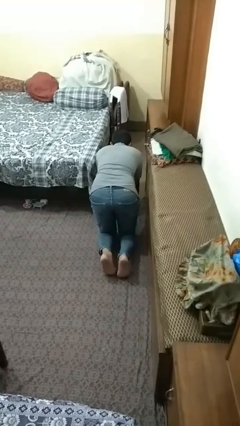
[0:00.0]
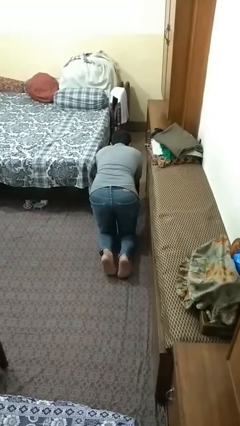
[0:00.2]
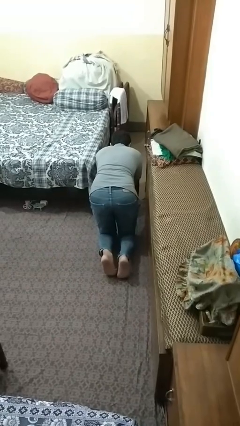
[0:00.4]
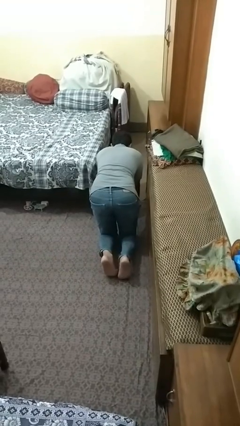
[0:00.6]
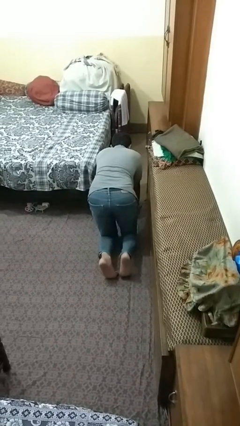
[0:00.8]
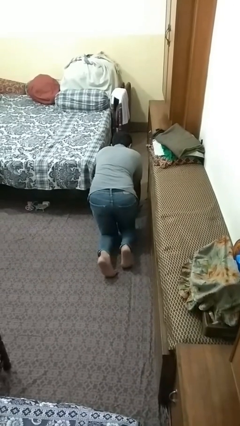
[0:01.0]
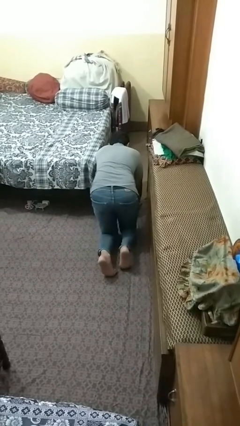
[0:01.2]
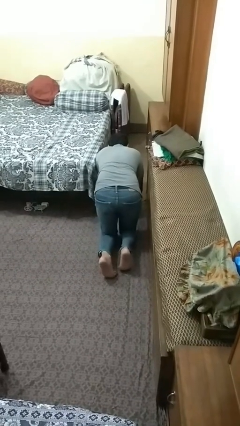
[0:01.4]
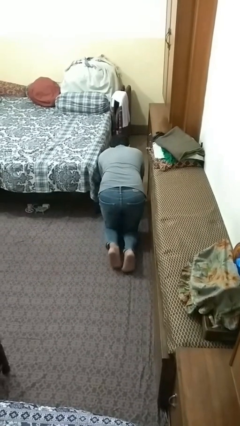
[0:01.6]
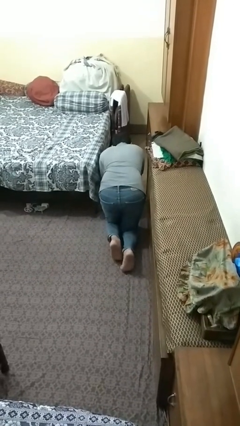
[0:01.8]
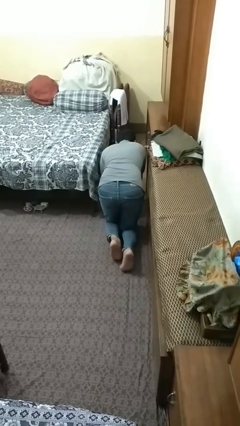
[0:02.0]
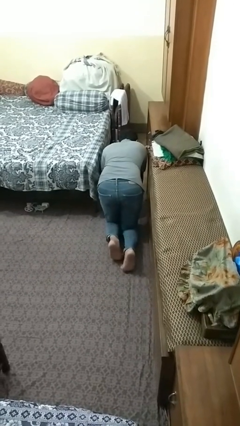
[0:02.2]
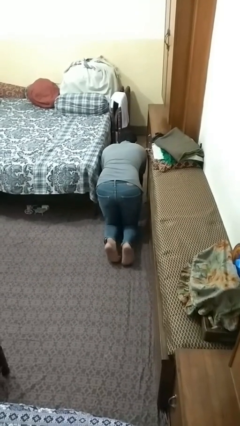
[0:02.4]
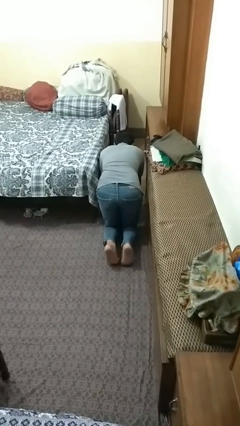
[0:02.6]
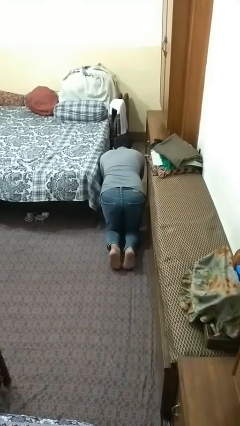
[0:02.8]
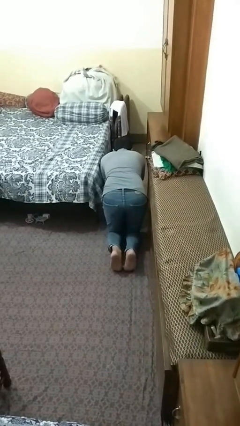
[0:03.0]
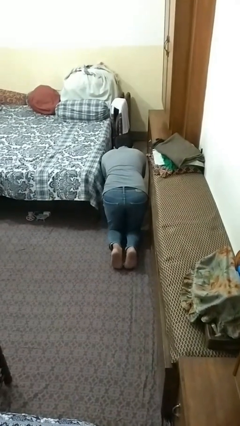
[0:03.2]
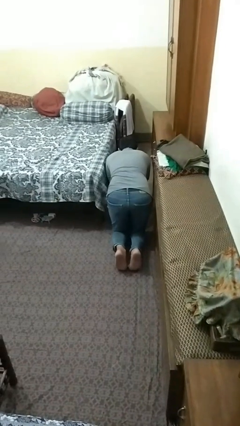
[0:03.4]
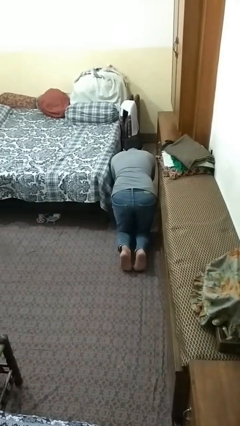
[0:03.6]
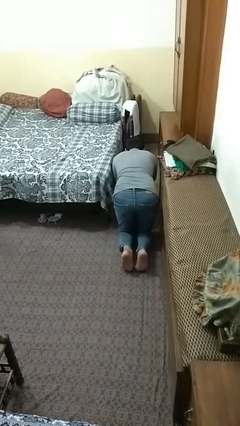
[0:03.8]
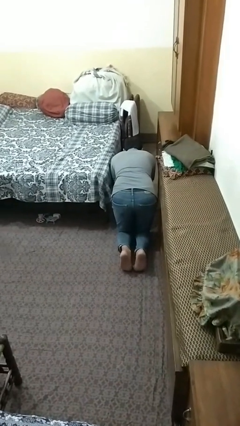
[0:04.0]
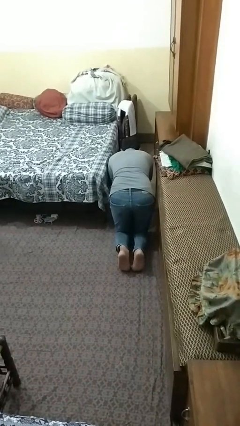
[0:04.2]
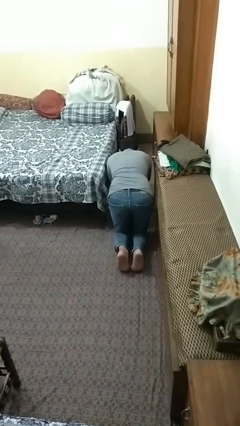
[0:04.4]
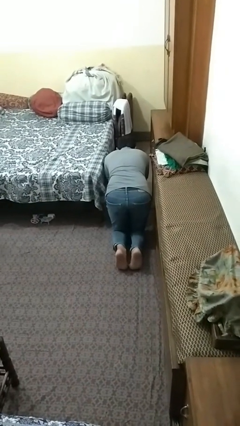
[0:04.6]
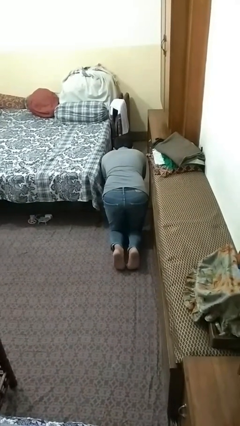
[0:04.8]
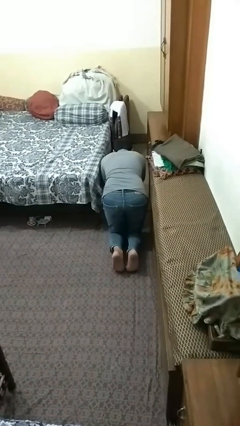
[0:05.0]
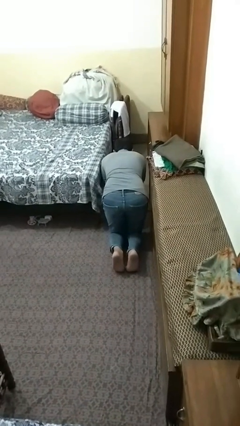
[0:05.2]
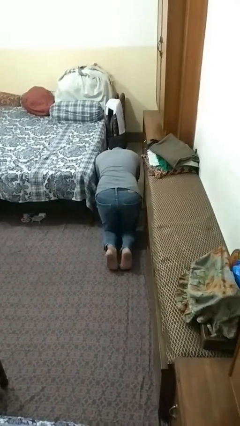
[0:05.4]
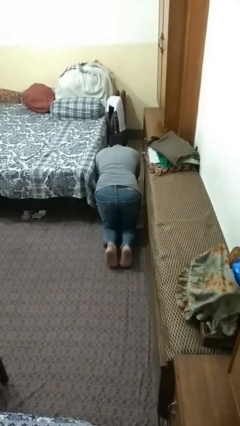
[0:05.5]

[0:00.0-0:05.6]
person crawls

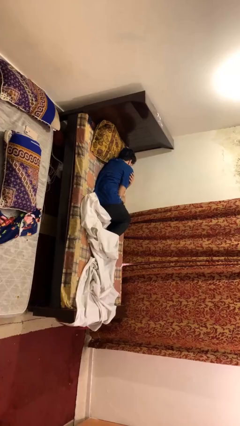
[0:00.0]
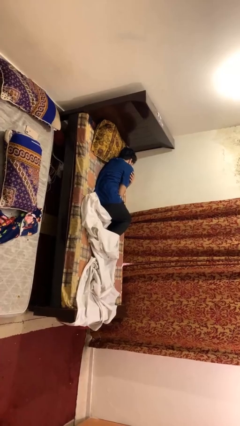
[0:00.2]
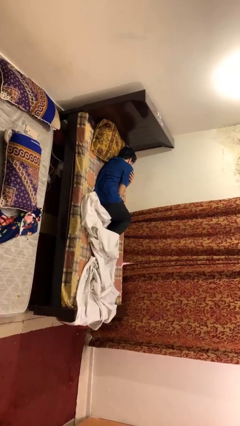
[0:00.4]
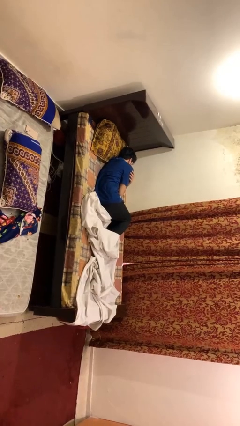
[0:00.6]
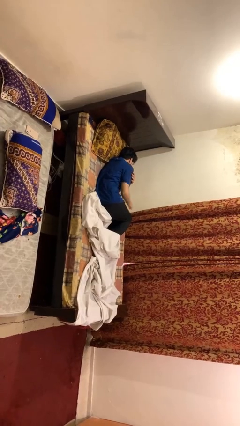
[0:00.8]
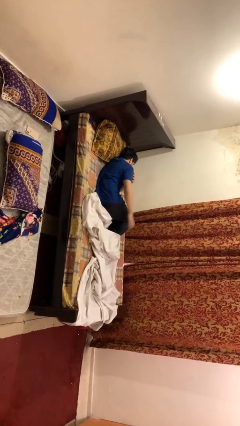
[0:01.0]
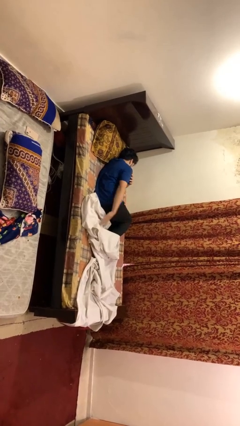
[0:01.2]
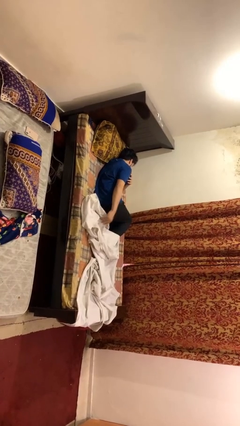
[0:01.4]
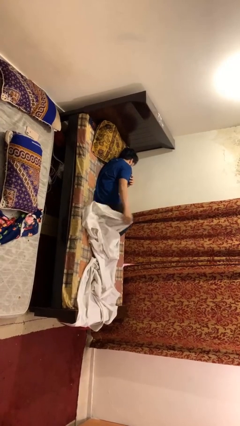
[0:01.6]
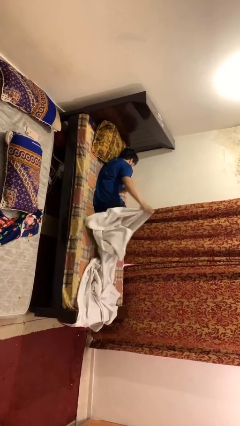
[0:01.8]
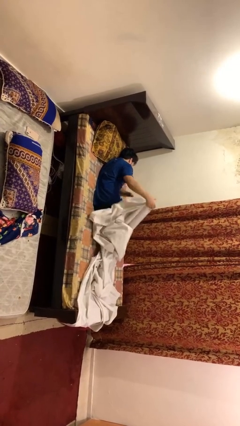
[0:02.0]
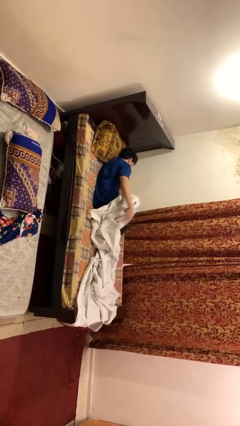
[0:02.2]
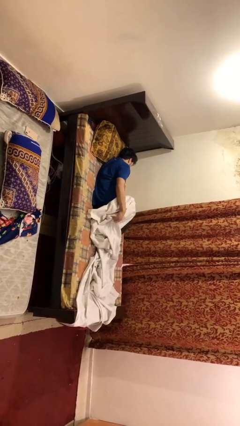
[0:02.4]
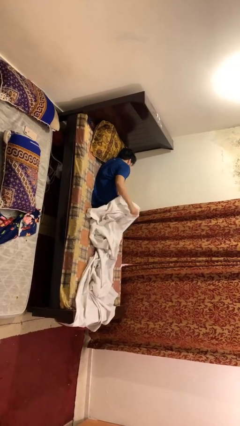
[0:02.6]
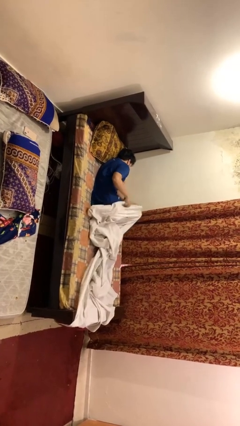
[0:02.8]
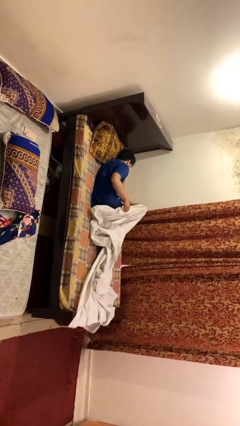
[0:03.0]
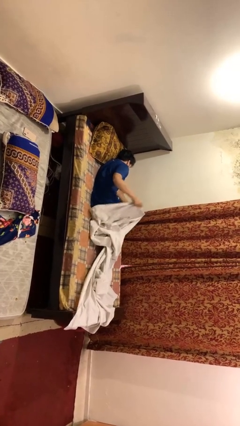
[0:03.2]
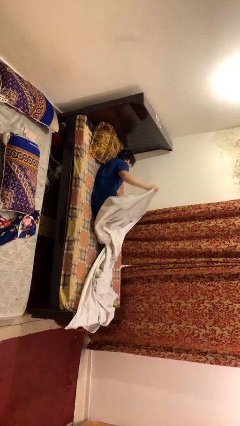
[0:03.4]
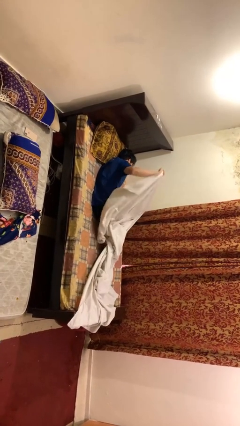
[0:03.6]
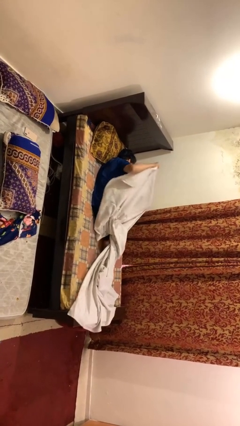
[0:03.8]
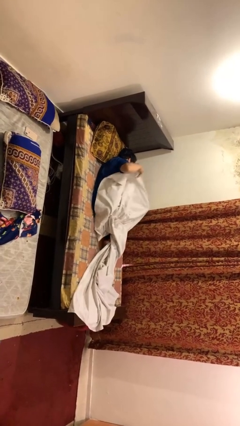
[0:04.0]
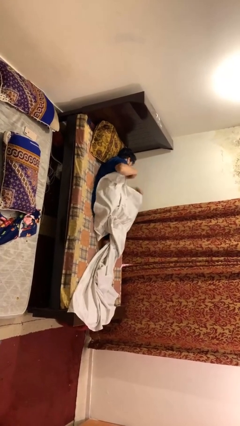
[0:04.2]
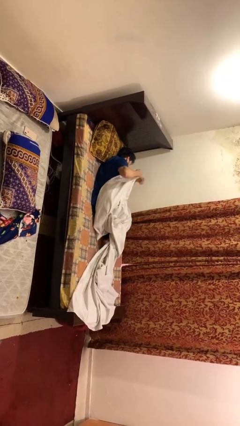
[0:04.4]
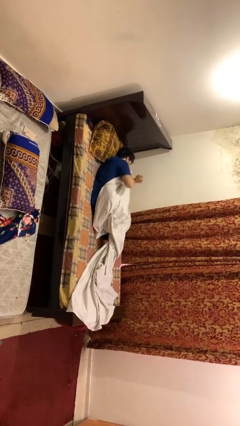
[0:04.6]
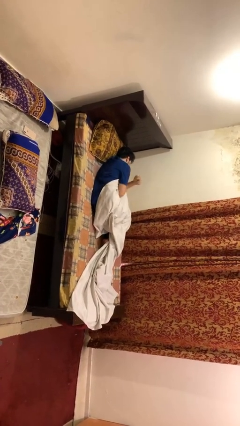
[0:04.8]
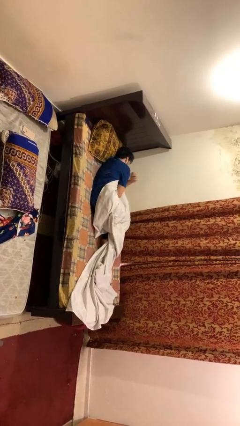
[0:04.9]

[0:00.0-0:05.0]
person covers with bedsheets

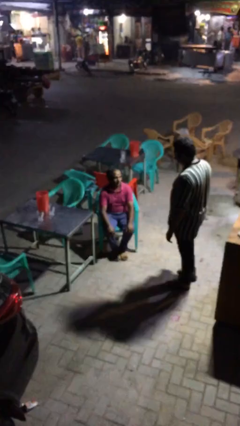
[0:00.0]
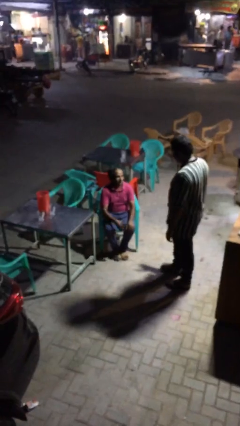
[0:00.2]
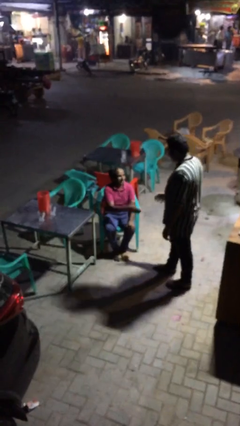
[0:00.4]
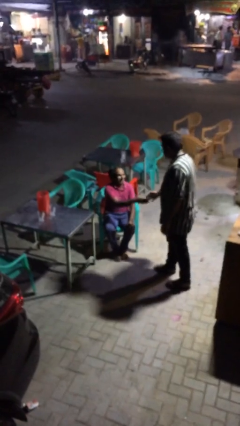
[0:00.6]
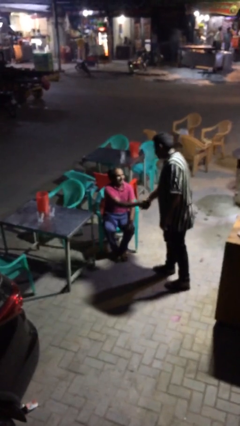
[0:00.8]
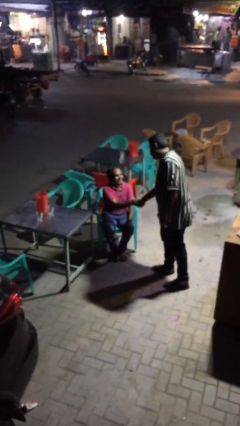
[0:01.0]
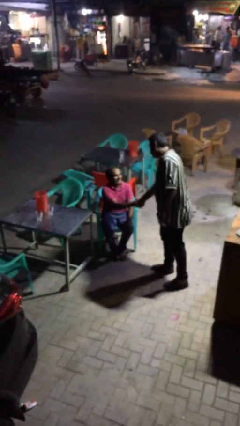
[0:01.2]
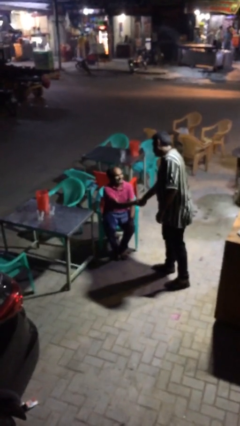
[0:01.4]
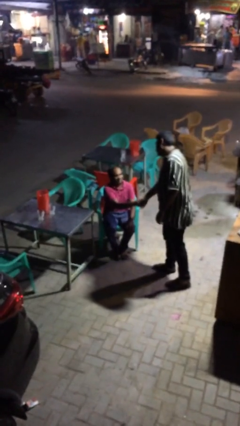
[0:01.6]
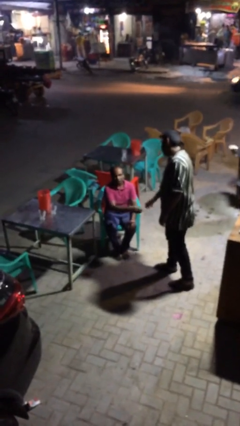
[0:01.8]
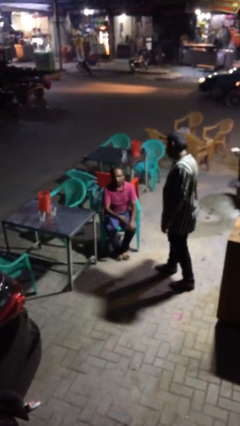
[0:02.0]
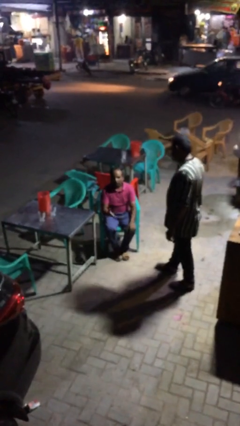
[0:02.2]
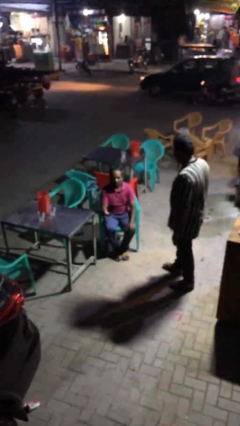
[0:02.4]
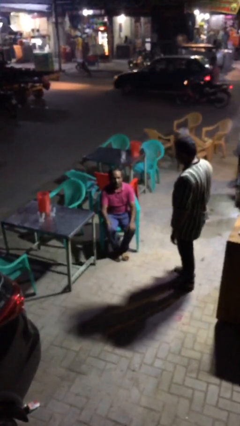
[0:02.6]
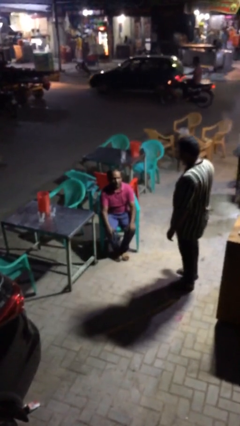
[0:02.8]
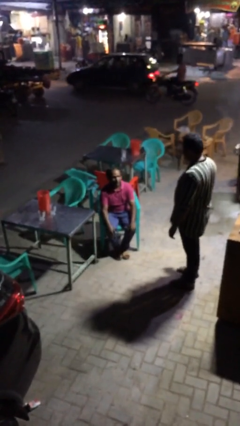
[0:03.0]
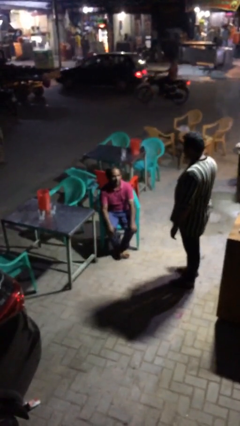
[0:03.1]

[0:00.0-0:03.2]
person shakes hand

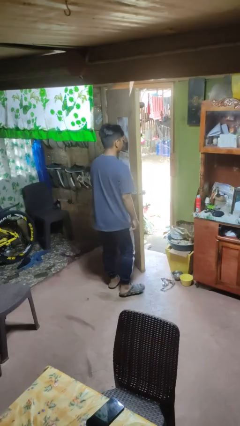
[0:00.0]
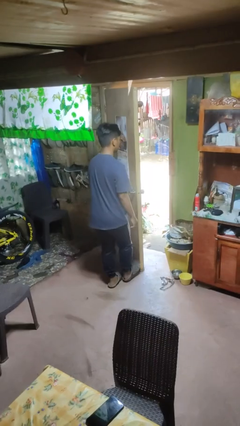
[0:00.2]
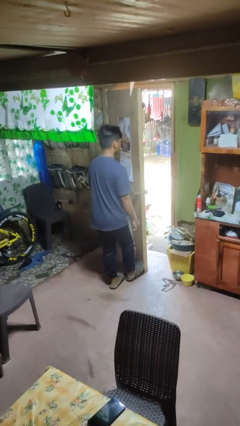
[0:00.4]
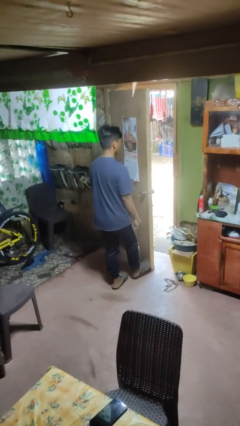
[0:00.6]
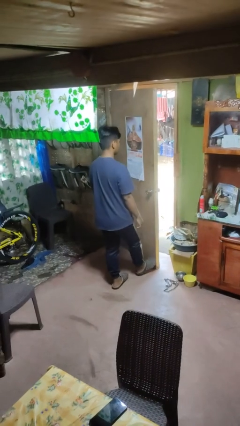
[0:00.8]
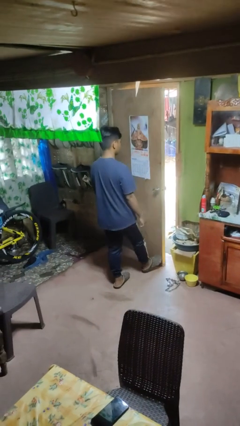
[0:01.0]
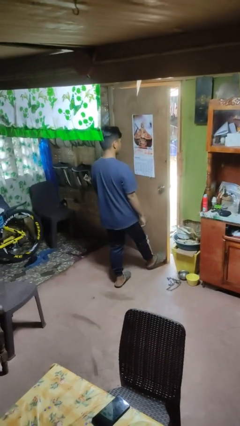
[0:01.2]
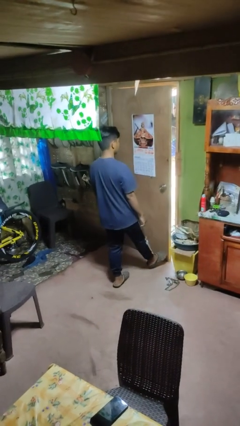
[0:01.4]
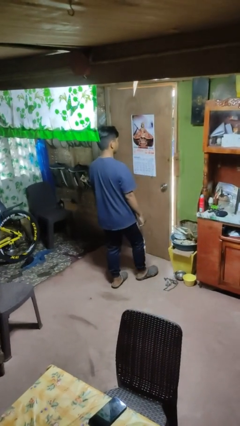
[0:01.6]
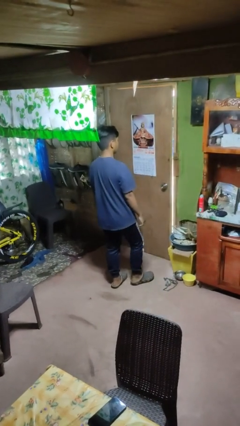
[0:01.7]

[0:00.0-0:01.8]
person closes door with foot

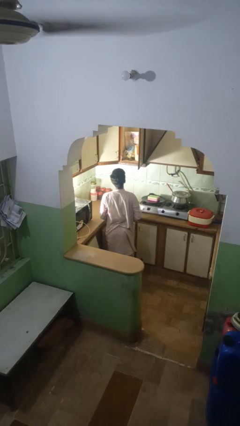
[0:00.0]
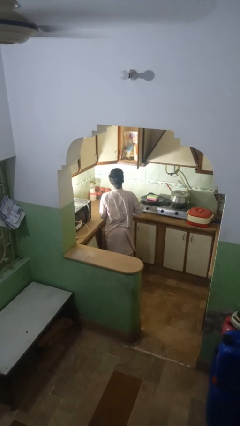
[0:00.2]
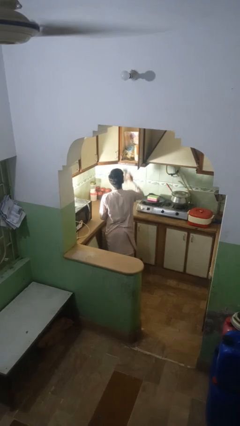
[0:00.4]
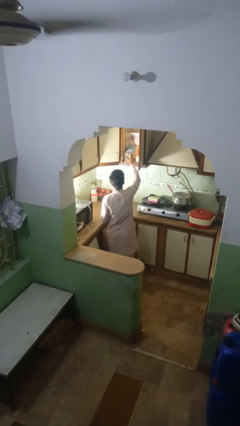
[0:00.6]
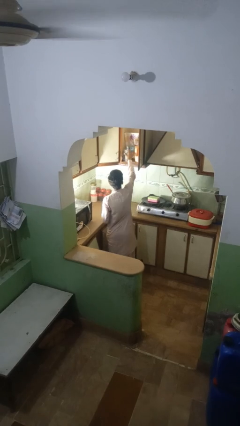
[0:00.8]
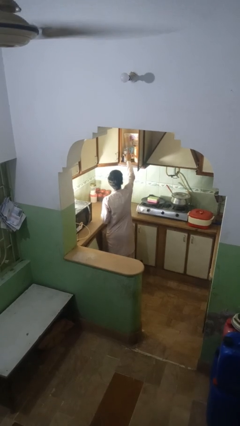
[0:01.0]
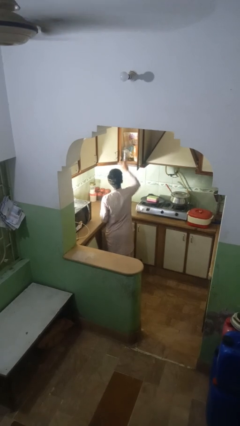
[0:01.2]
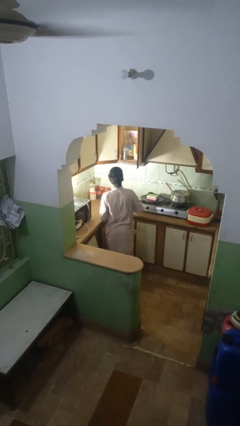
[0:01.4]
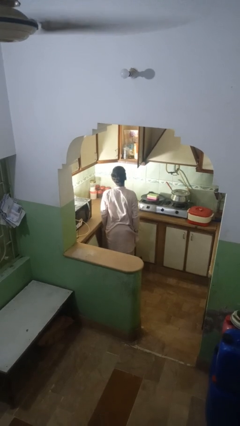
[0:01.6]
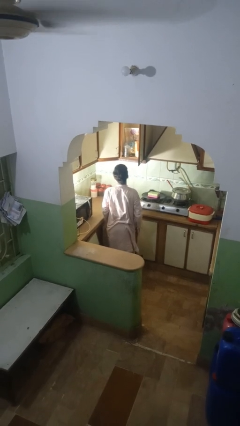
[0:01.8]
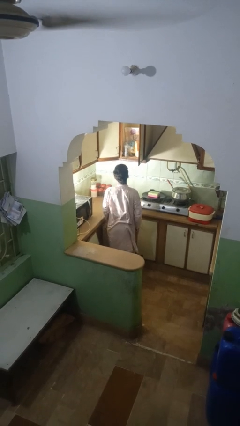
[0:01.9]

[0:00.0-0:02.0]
person puts object into kitchen drawer
